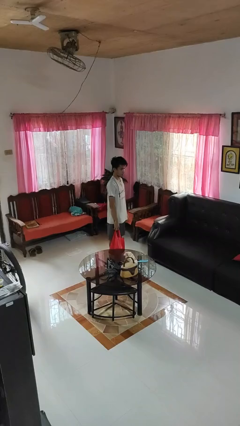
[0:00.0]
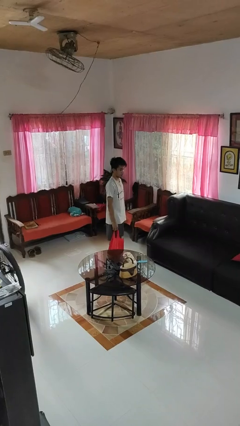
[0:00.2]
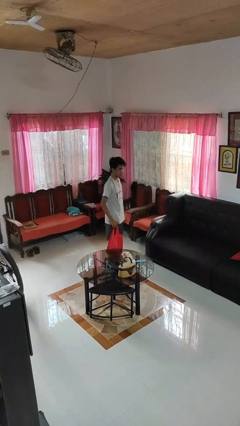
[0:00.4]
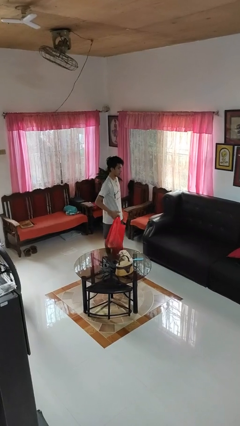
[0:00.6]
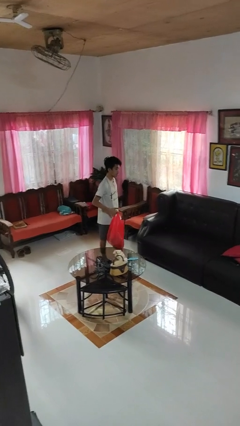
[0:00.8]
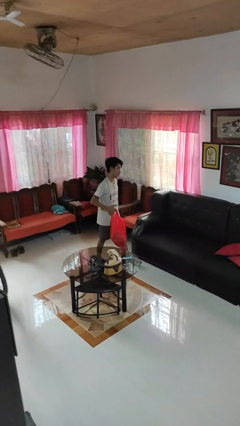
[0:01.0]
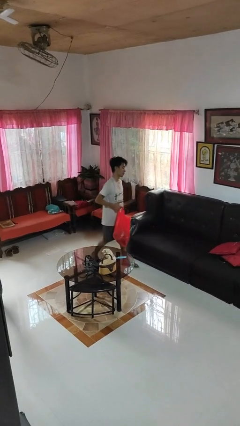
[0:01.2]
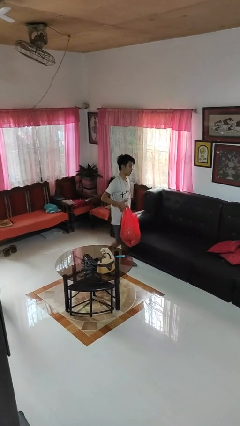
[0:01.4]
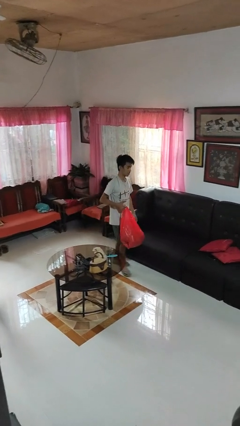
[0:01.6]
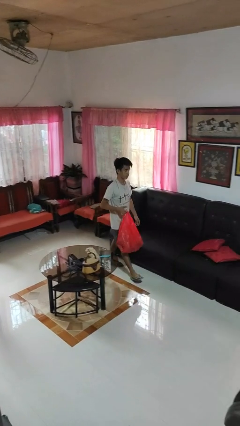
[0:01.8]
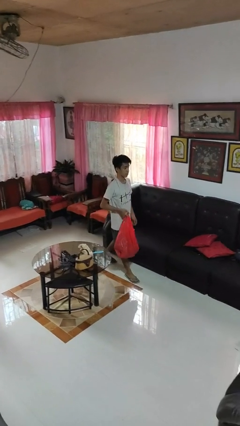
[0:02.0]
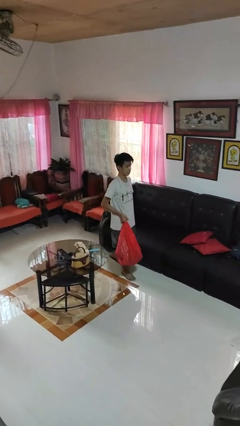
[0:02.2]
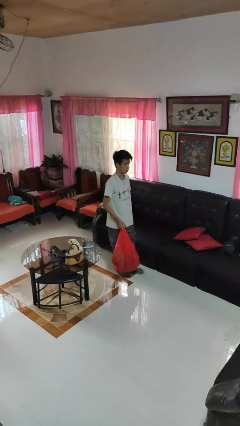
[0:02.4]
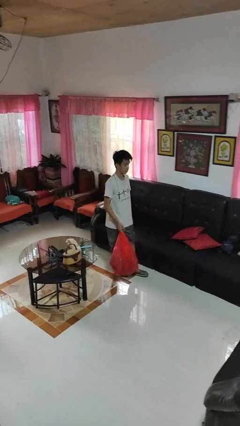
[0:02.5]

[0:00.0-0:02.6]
person carries groceries

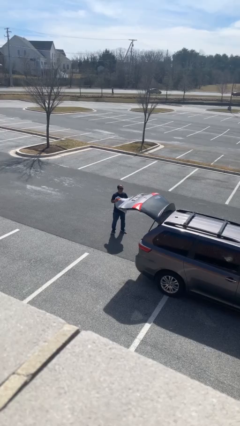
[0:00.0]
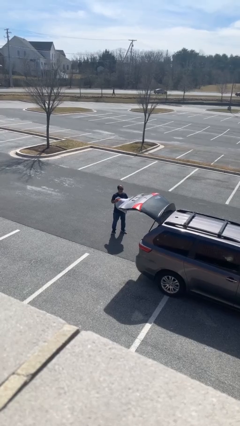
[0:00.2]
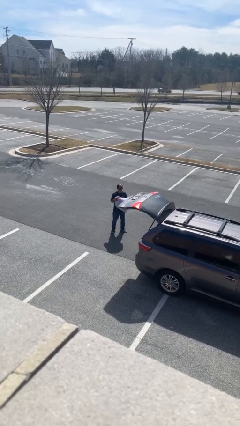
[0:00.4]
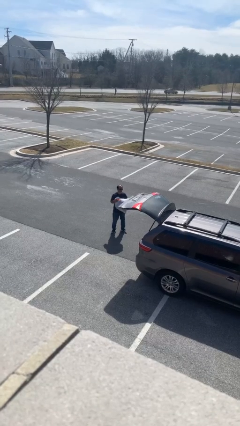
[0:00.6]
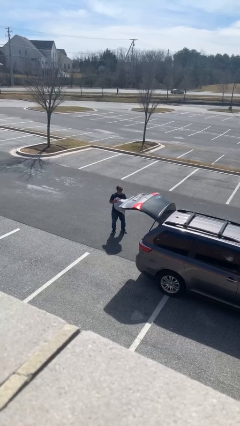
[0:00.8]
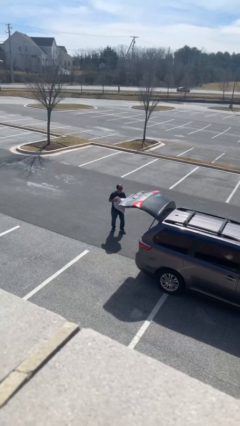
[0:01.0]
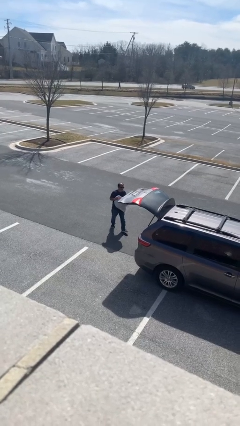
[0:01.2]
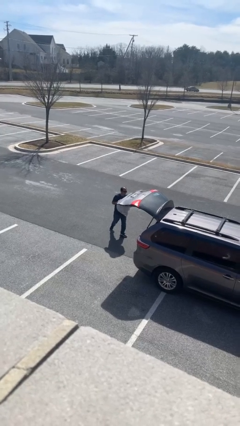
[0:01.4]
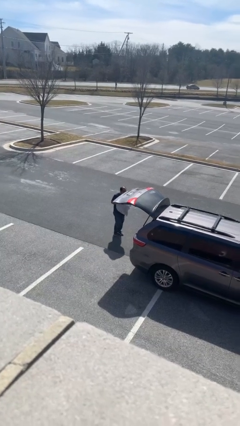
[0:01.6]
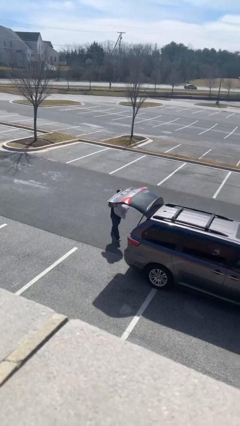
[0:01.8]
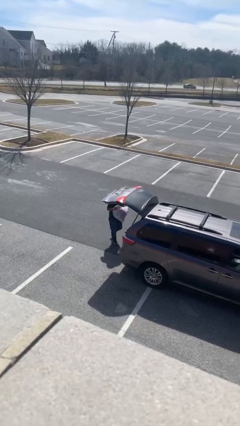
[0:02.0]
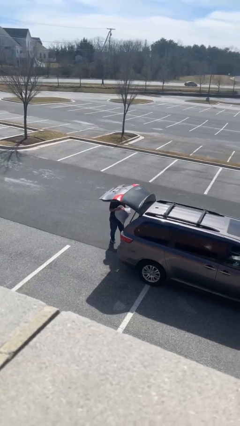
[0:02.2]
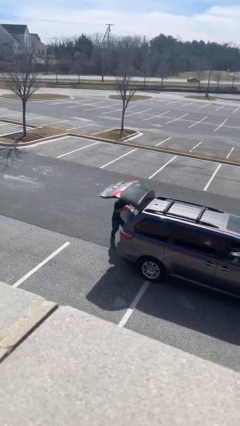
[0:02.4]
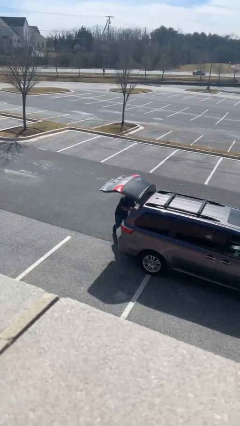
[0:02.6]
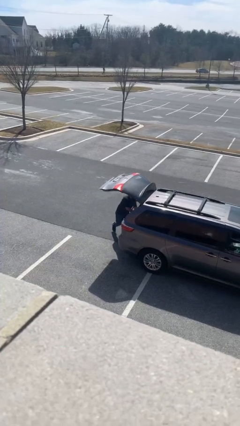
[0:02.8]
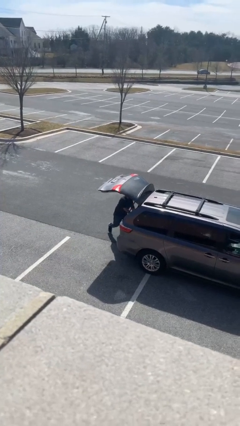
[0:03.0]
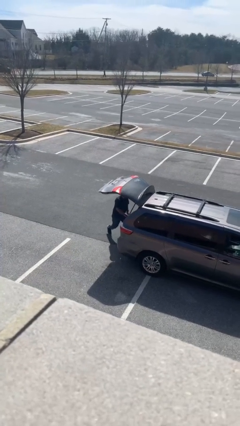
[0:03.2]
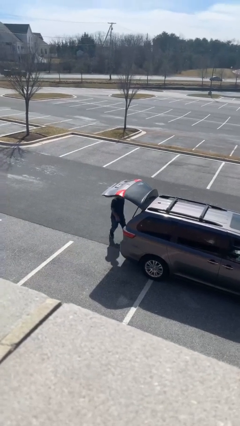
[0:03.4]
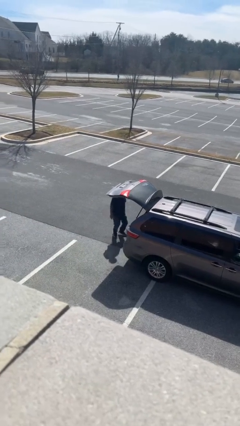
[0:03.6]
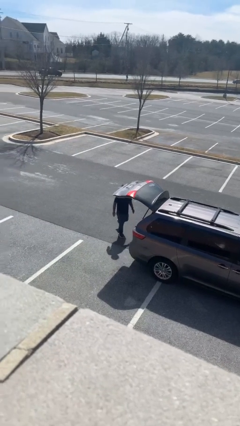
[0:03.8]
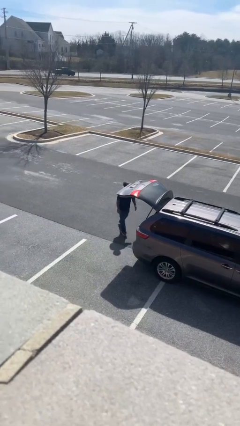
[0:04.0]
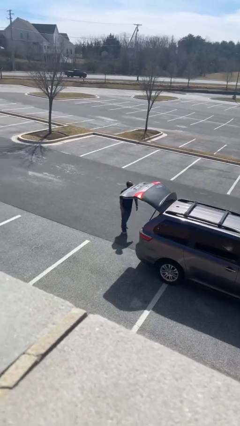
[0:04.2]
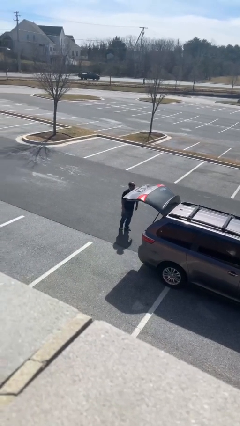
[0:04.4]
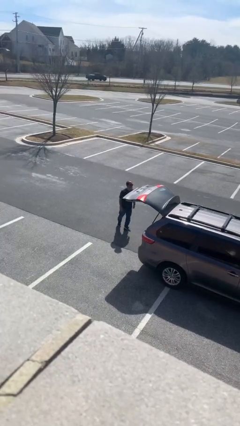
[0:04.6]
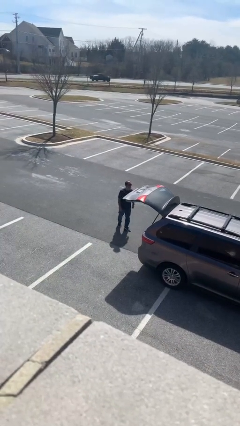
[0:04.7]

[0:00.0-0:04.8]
person loads car

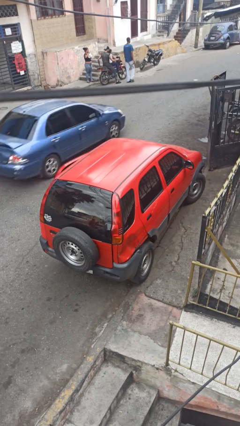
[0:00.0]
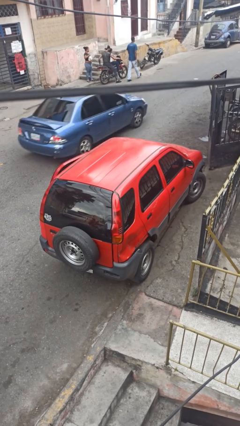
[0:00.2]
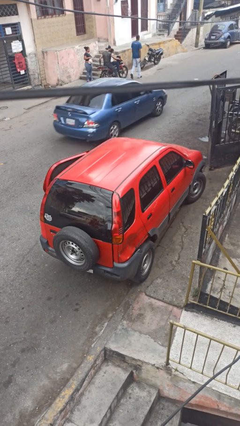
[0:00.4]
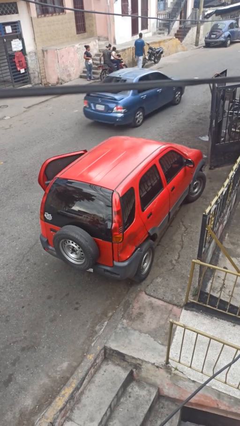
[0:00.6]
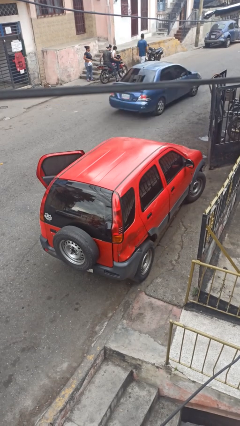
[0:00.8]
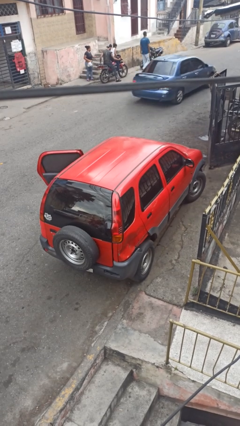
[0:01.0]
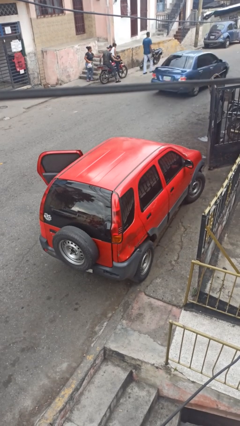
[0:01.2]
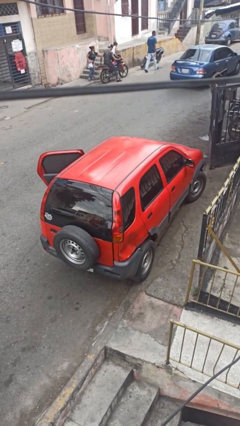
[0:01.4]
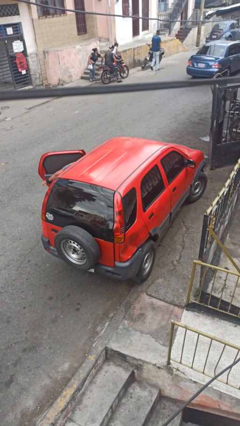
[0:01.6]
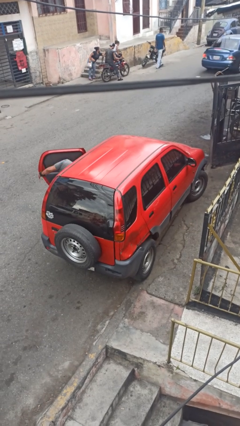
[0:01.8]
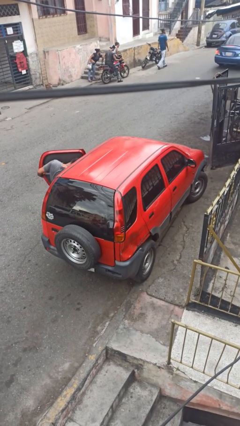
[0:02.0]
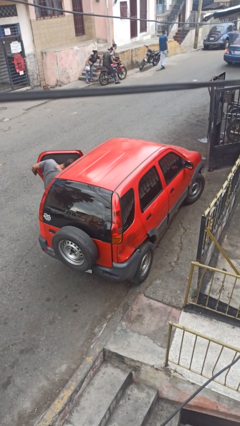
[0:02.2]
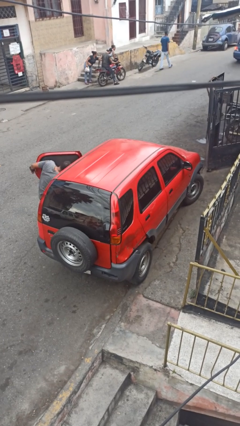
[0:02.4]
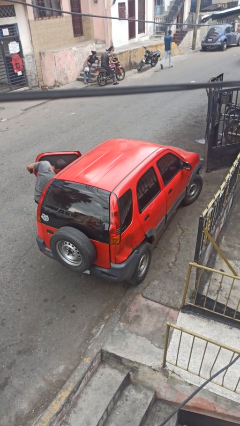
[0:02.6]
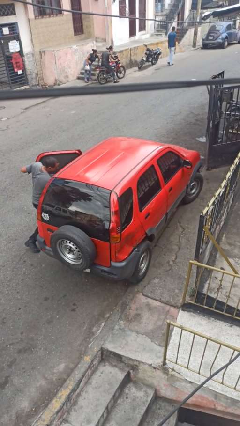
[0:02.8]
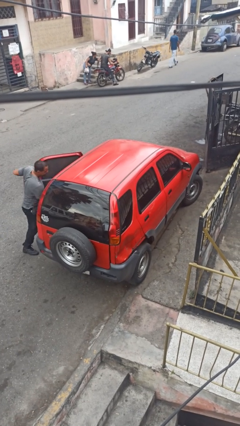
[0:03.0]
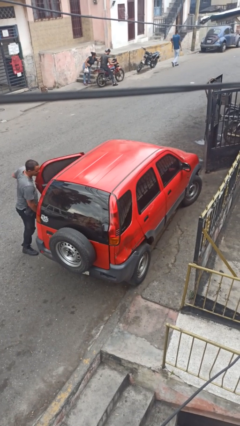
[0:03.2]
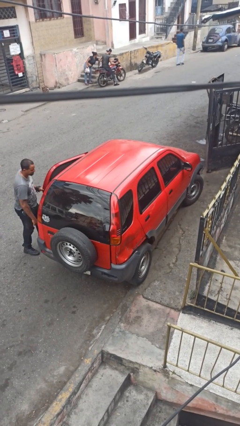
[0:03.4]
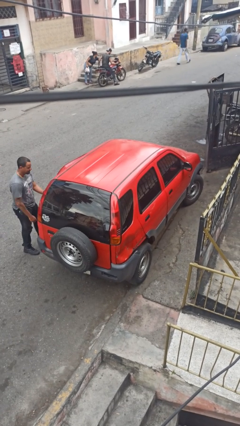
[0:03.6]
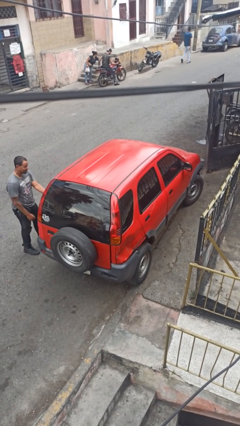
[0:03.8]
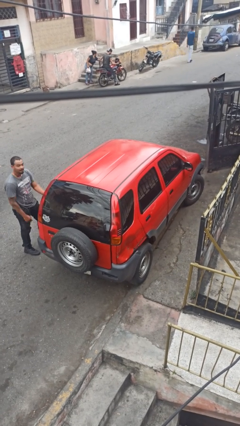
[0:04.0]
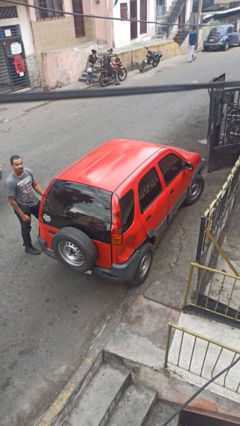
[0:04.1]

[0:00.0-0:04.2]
car drops off person

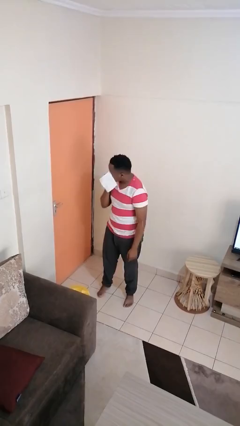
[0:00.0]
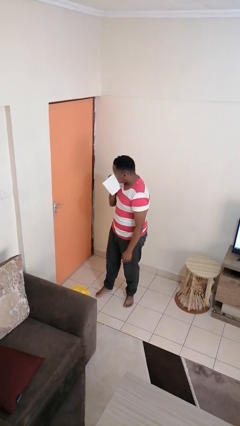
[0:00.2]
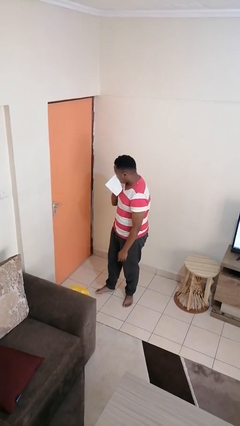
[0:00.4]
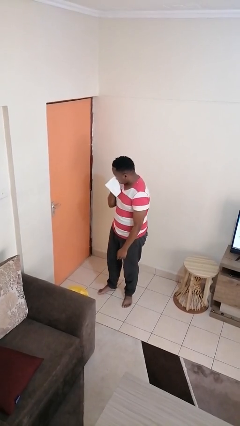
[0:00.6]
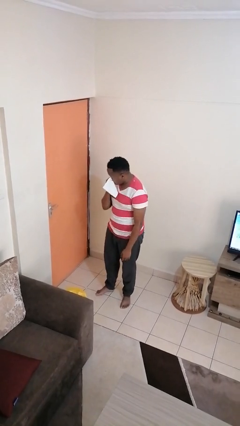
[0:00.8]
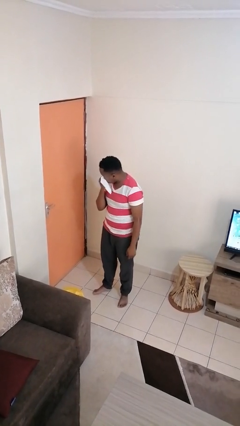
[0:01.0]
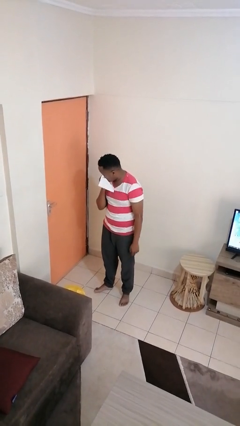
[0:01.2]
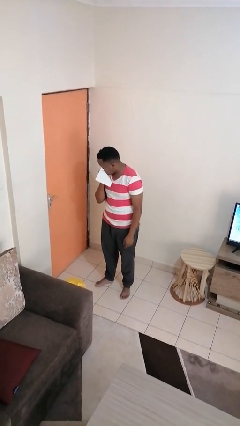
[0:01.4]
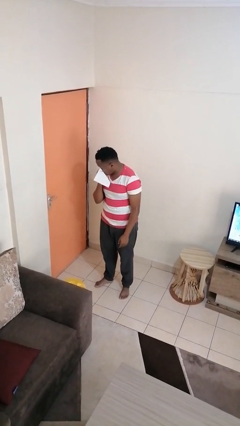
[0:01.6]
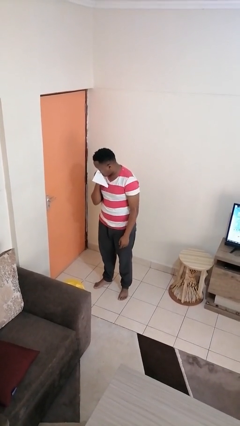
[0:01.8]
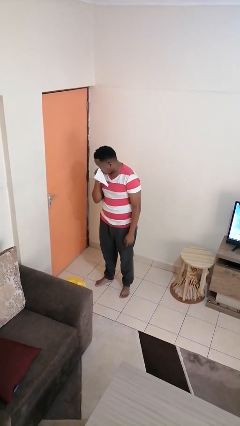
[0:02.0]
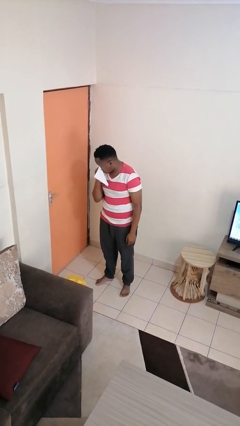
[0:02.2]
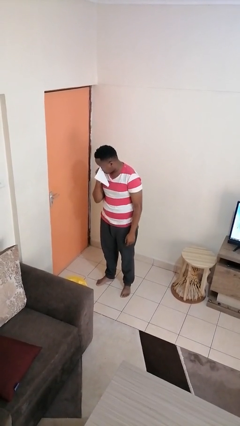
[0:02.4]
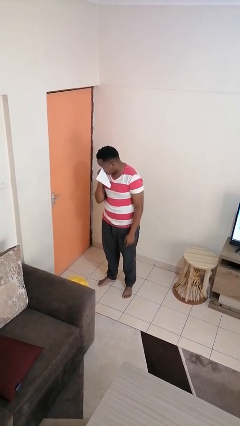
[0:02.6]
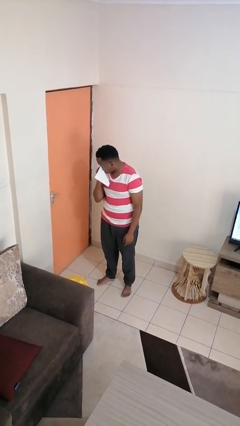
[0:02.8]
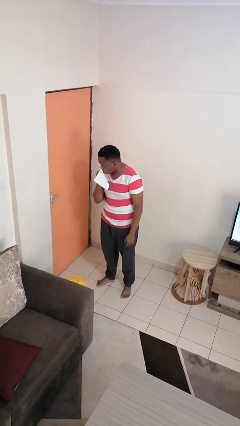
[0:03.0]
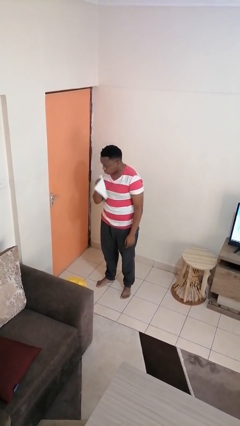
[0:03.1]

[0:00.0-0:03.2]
person blows nose

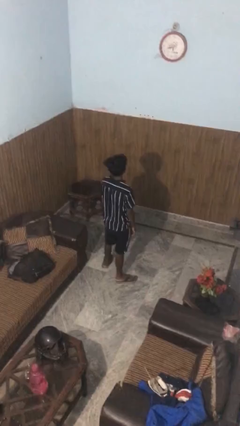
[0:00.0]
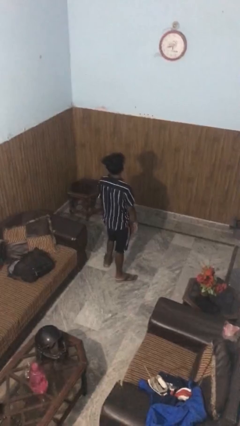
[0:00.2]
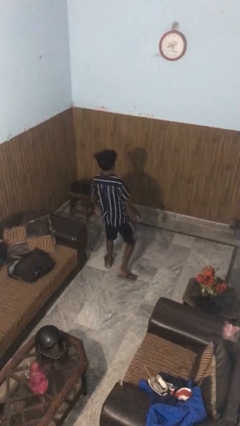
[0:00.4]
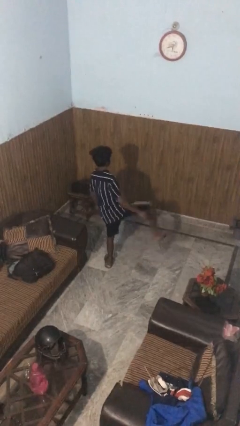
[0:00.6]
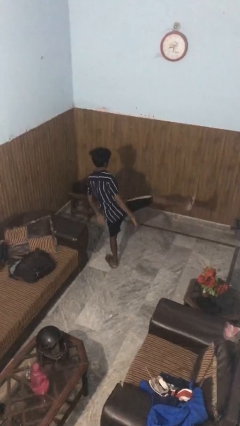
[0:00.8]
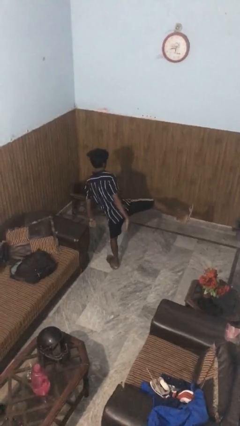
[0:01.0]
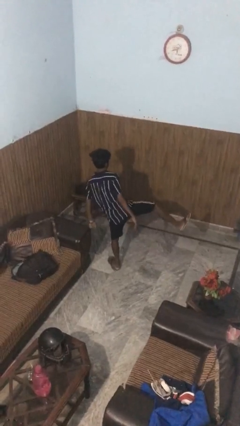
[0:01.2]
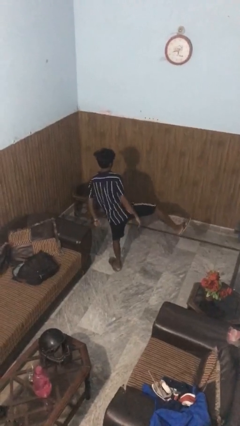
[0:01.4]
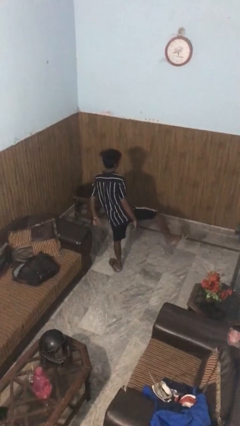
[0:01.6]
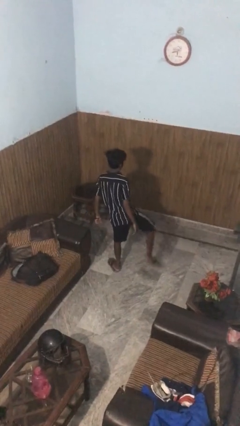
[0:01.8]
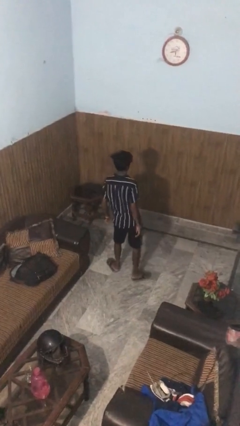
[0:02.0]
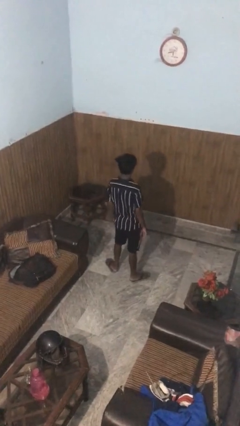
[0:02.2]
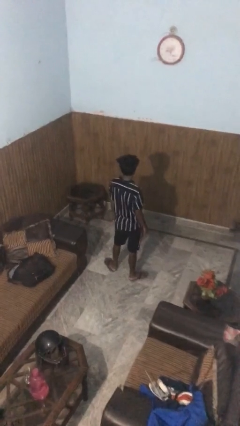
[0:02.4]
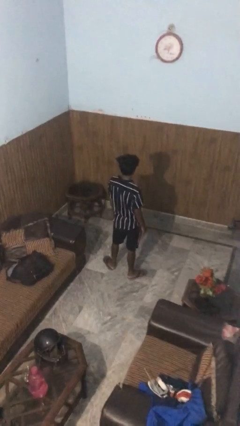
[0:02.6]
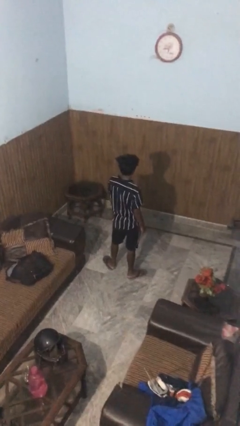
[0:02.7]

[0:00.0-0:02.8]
person karate kicks
